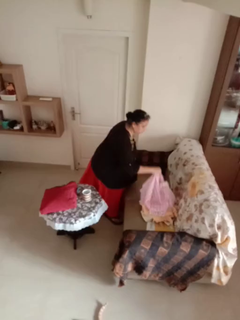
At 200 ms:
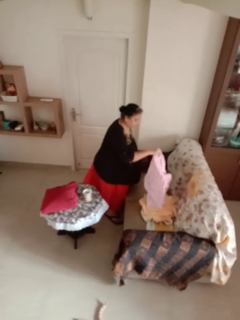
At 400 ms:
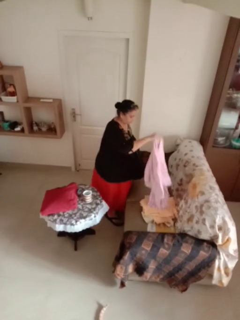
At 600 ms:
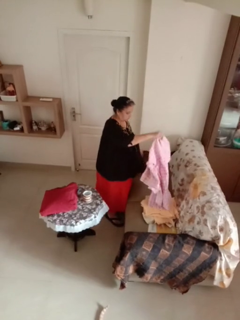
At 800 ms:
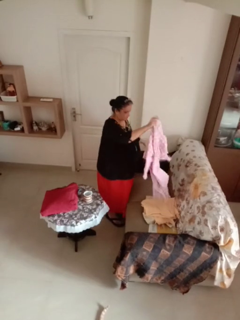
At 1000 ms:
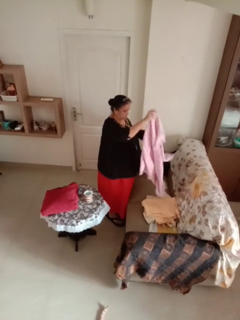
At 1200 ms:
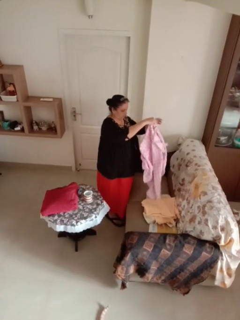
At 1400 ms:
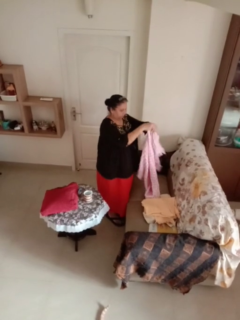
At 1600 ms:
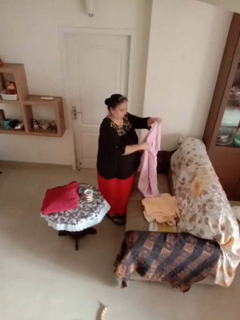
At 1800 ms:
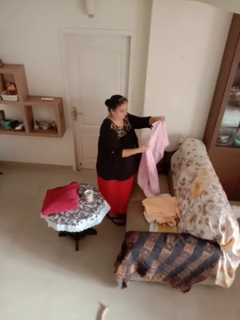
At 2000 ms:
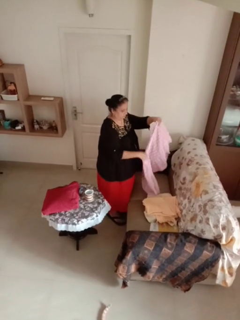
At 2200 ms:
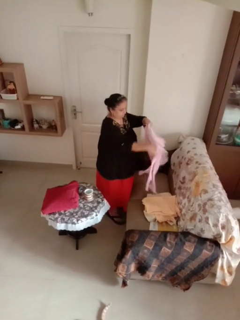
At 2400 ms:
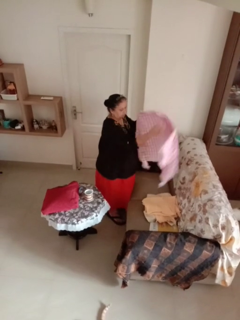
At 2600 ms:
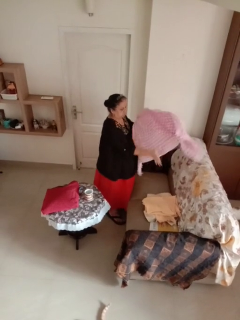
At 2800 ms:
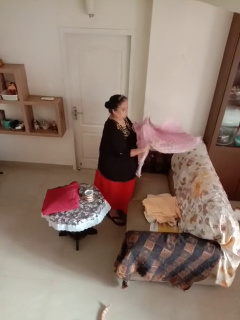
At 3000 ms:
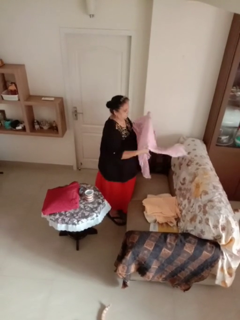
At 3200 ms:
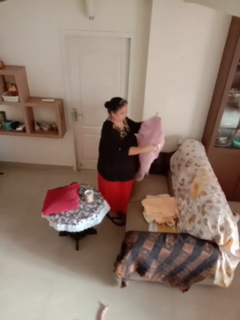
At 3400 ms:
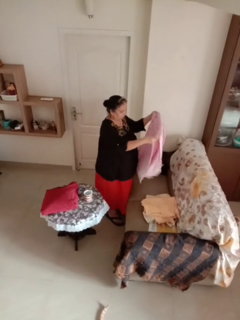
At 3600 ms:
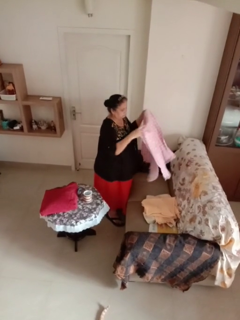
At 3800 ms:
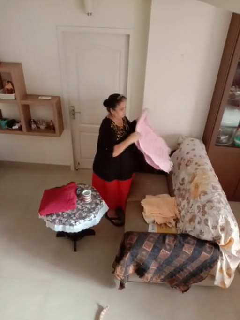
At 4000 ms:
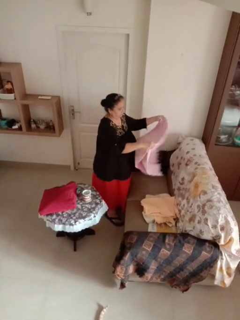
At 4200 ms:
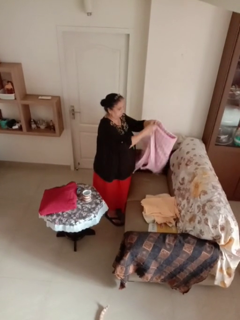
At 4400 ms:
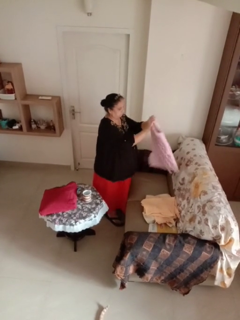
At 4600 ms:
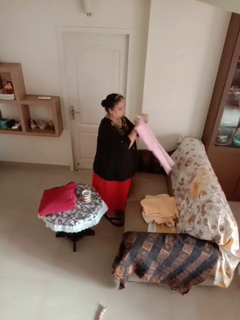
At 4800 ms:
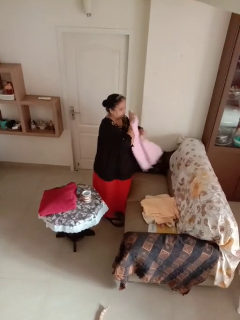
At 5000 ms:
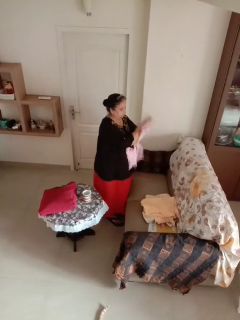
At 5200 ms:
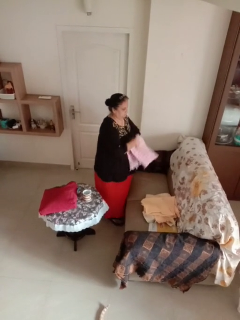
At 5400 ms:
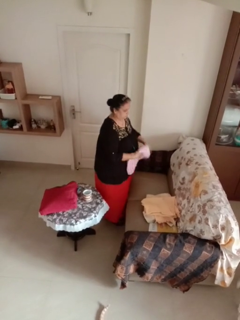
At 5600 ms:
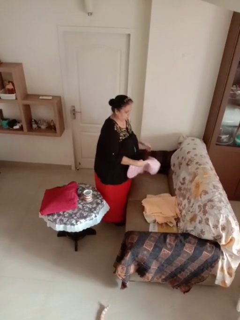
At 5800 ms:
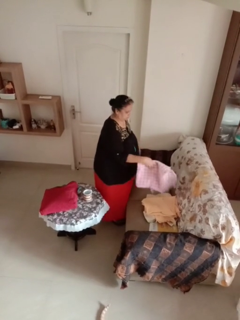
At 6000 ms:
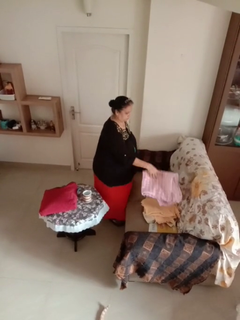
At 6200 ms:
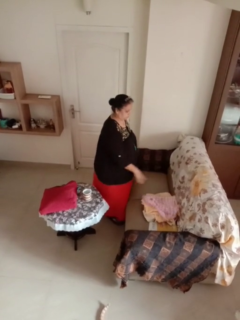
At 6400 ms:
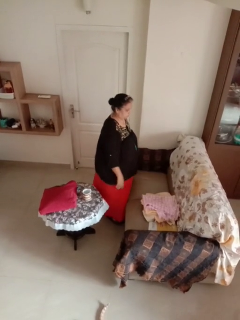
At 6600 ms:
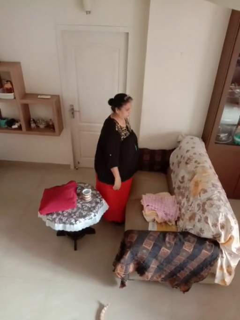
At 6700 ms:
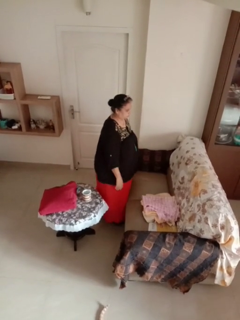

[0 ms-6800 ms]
person folds towel

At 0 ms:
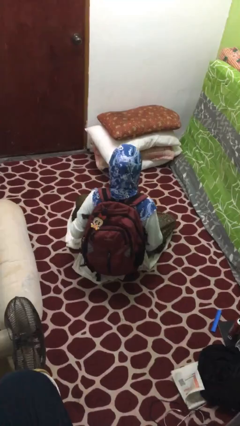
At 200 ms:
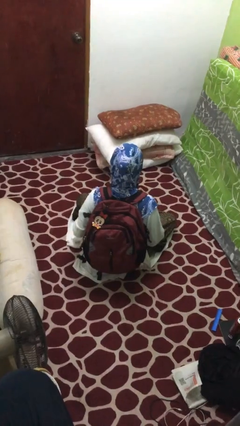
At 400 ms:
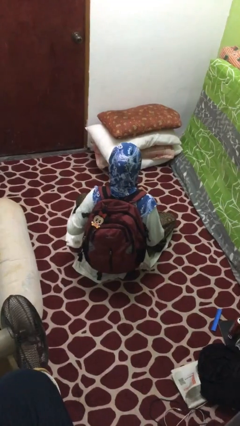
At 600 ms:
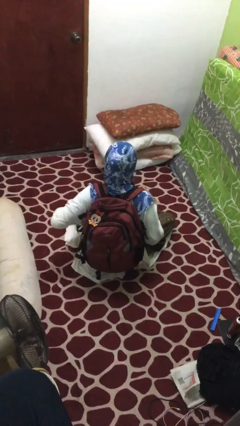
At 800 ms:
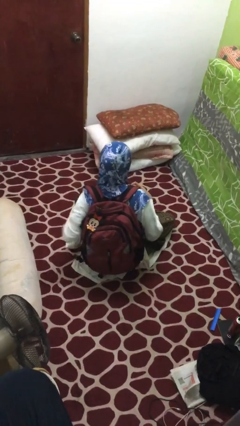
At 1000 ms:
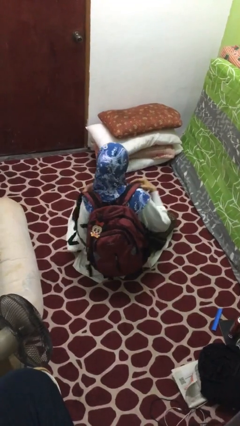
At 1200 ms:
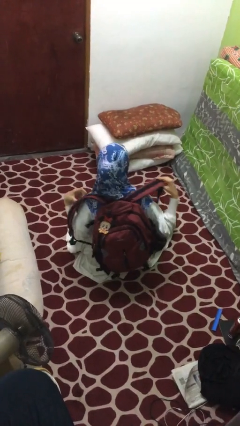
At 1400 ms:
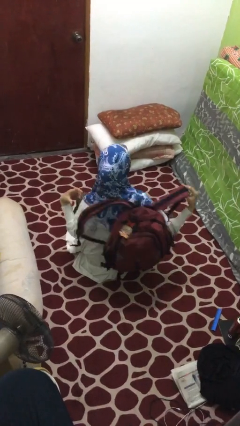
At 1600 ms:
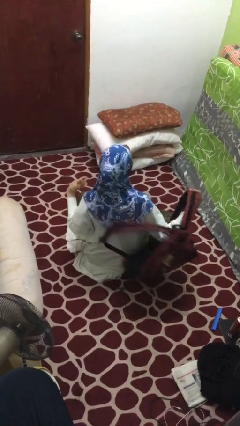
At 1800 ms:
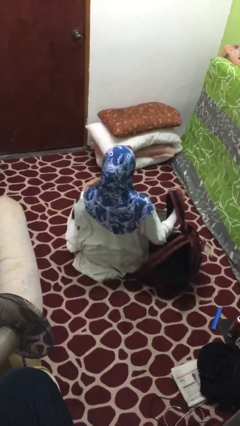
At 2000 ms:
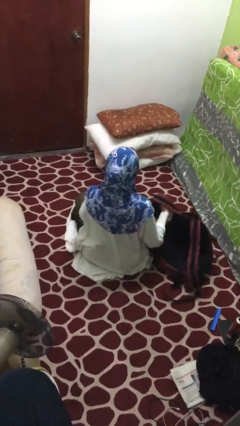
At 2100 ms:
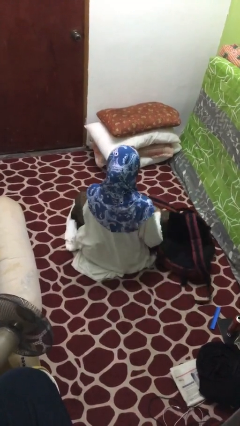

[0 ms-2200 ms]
person takes off backpack

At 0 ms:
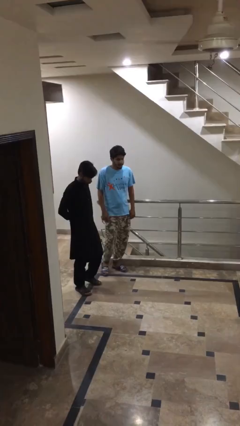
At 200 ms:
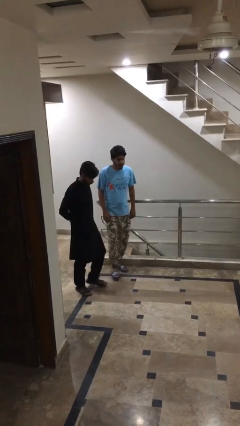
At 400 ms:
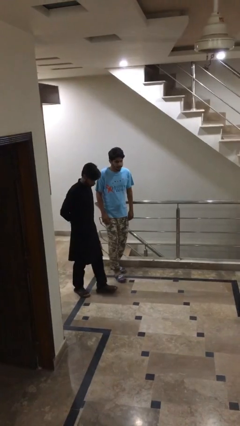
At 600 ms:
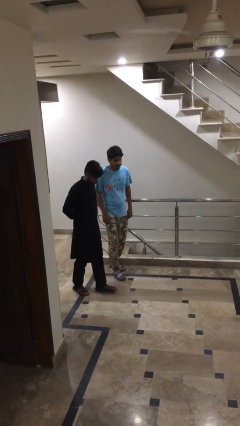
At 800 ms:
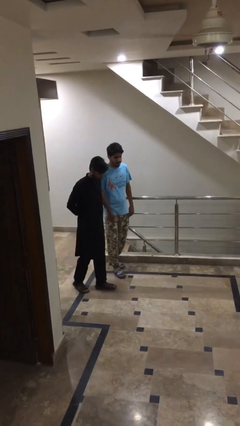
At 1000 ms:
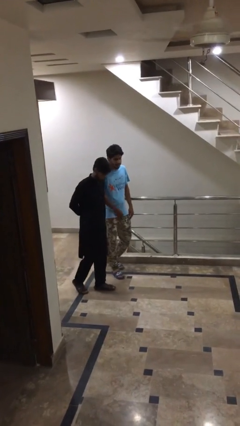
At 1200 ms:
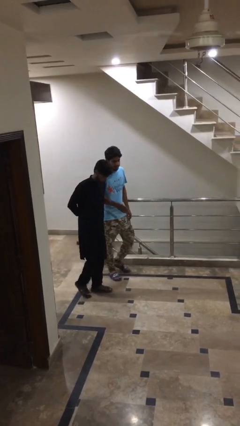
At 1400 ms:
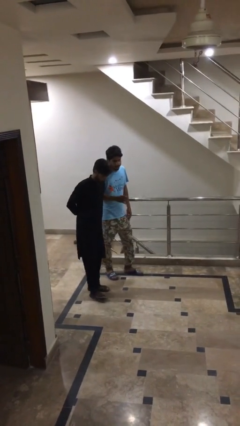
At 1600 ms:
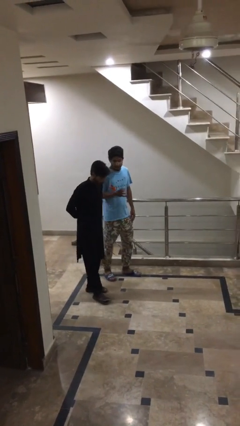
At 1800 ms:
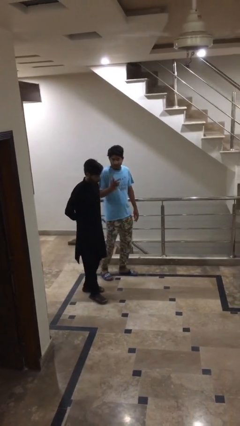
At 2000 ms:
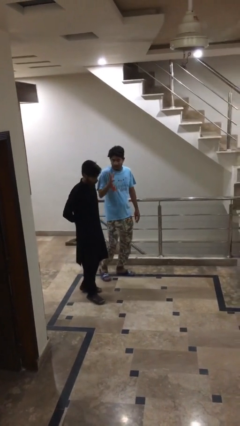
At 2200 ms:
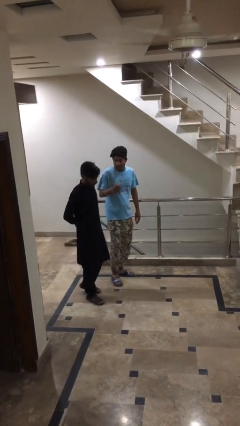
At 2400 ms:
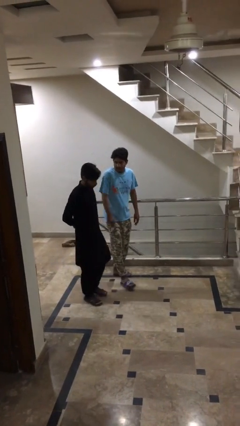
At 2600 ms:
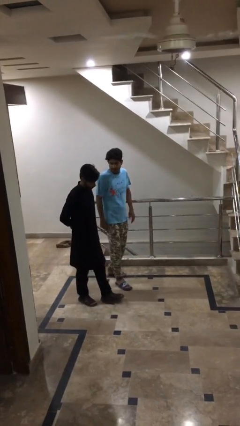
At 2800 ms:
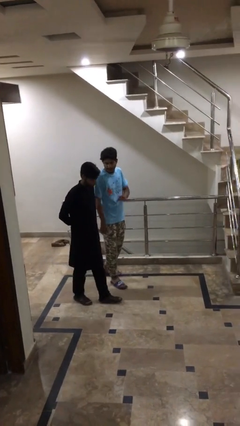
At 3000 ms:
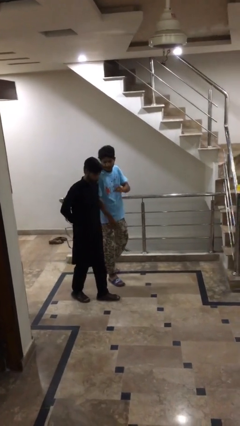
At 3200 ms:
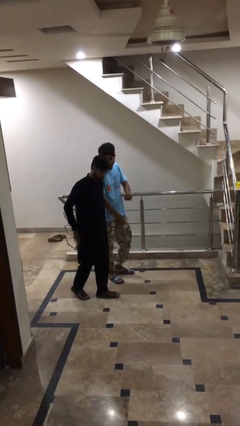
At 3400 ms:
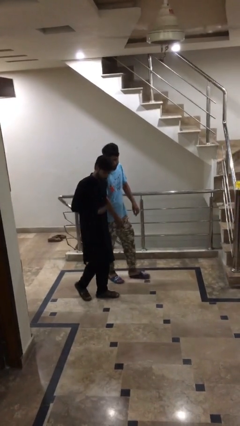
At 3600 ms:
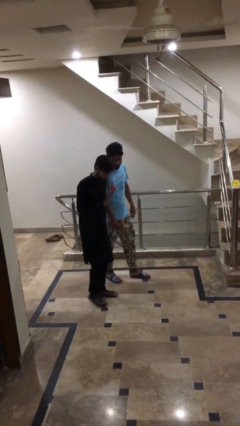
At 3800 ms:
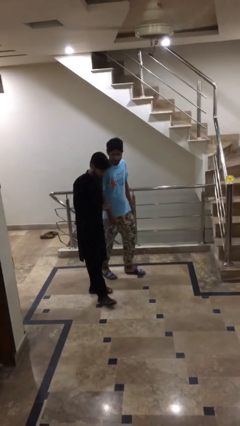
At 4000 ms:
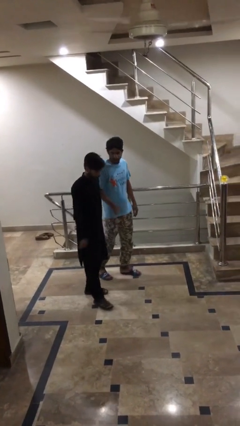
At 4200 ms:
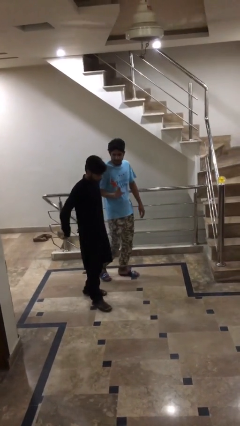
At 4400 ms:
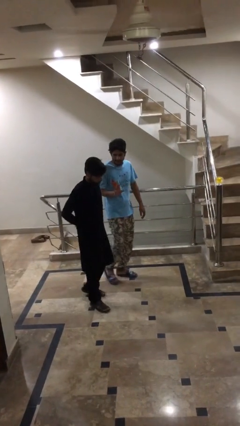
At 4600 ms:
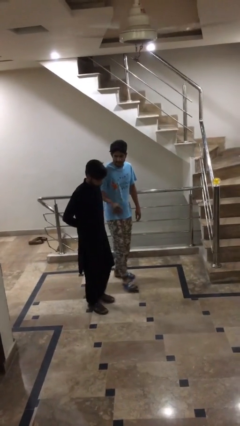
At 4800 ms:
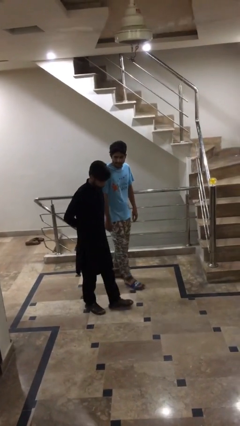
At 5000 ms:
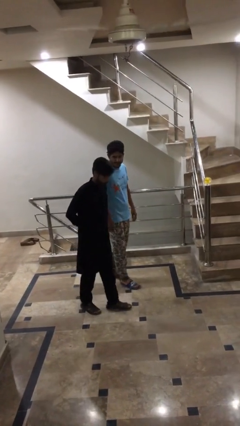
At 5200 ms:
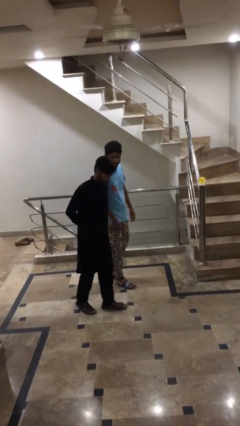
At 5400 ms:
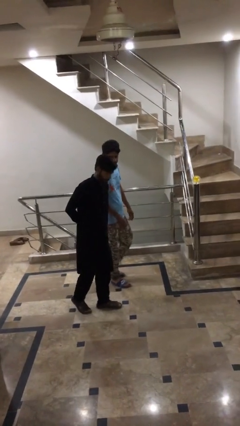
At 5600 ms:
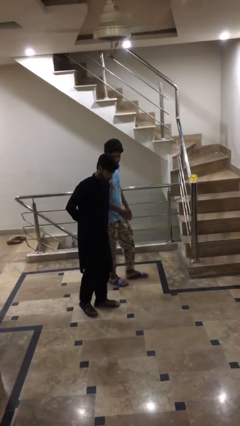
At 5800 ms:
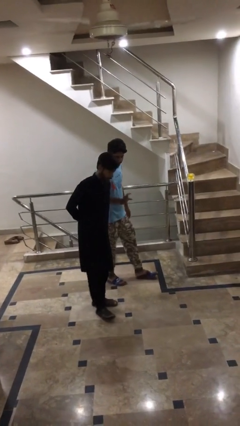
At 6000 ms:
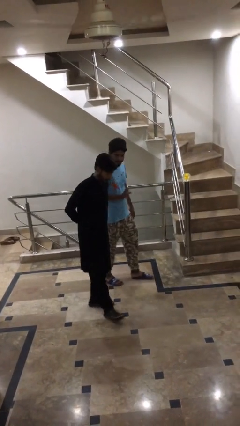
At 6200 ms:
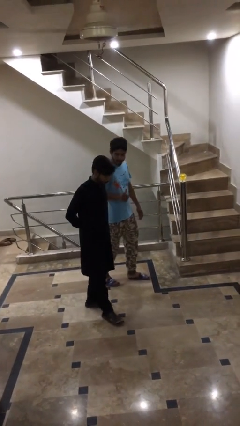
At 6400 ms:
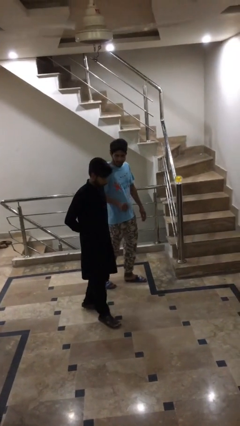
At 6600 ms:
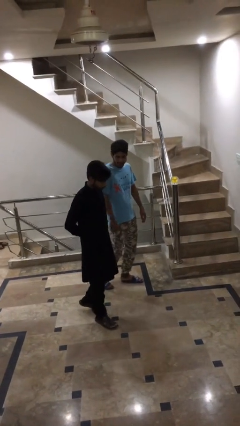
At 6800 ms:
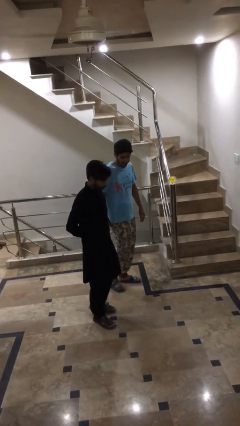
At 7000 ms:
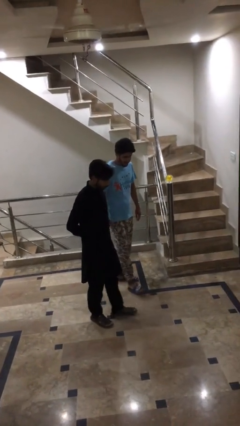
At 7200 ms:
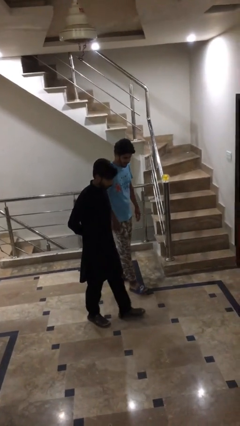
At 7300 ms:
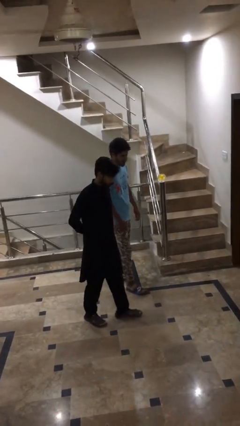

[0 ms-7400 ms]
person talks to person

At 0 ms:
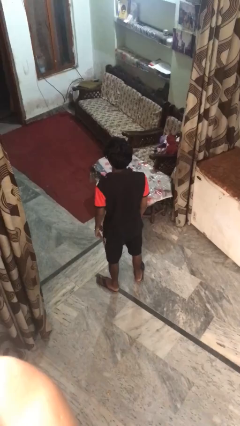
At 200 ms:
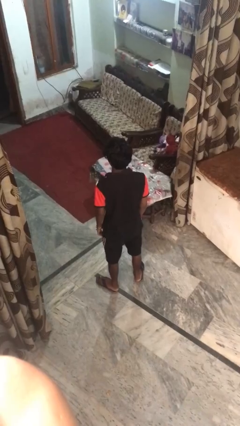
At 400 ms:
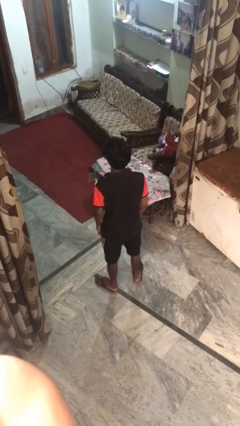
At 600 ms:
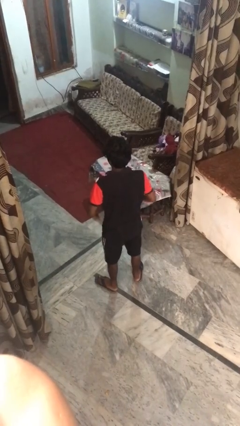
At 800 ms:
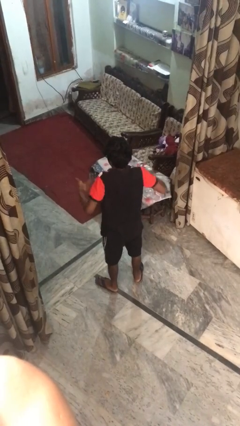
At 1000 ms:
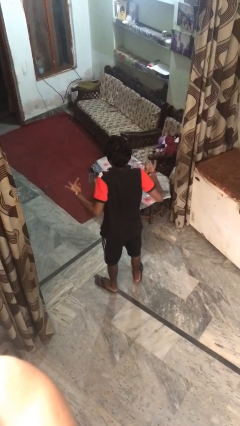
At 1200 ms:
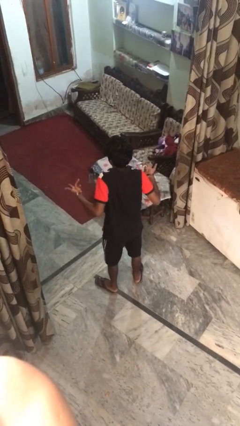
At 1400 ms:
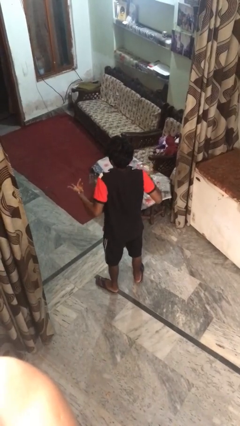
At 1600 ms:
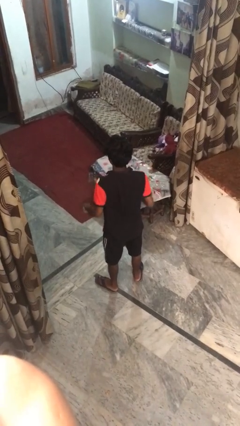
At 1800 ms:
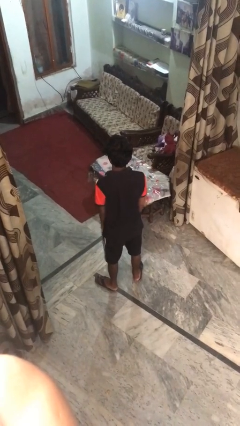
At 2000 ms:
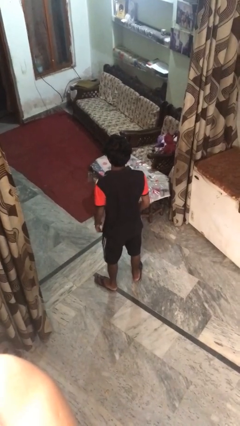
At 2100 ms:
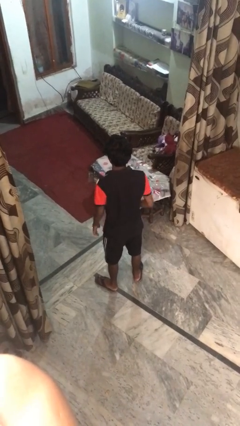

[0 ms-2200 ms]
person shrugs

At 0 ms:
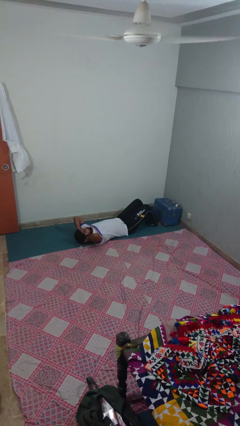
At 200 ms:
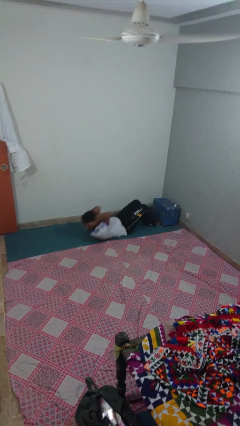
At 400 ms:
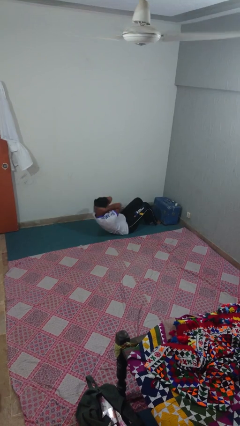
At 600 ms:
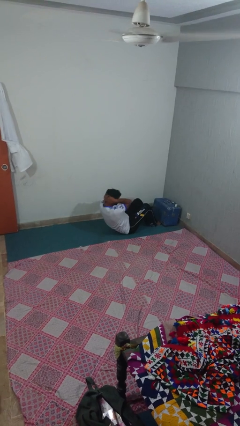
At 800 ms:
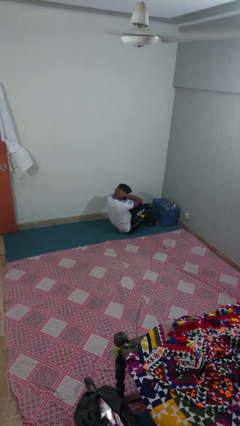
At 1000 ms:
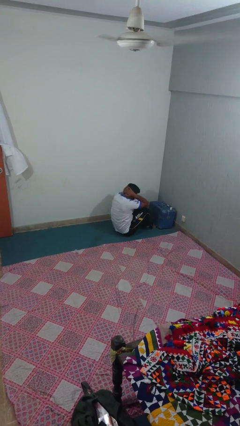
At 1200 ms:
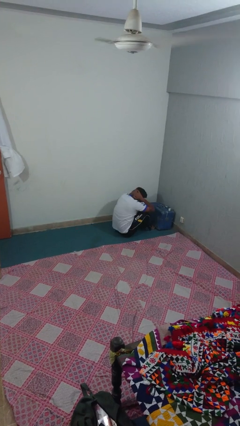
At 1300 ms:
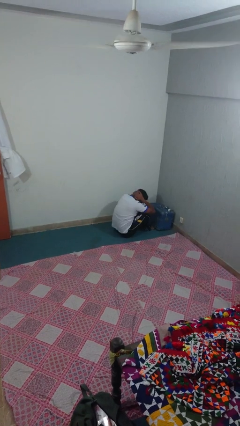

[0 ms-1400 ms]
person exercises with situp
